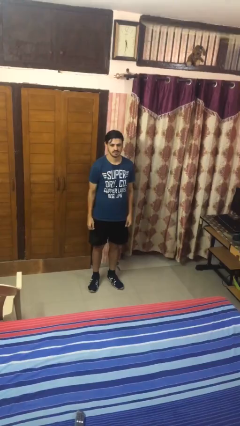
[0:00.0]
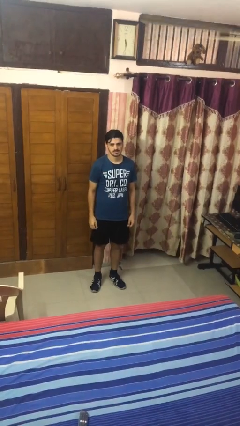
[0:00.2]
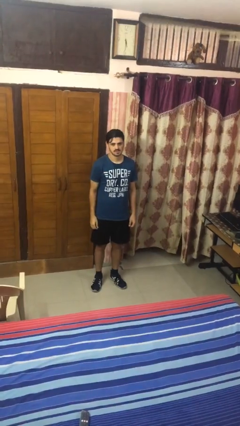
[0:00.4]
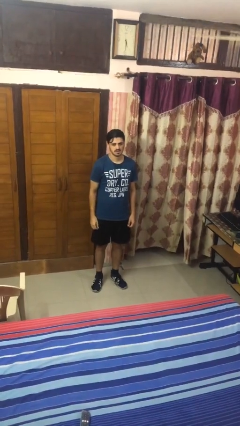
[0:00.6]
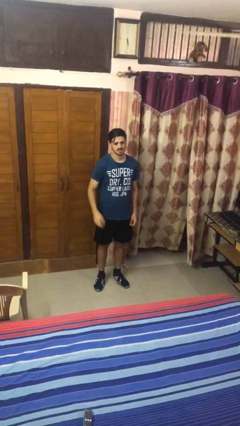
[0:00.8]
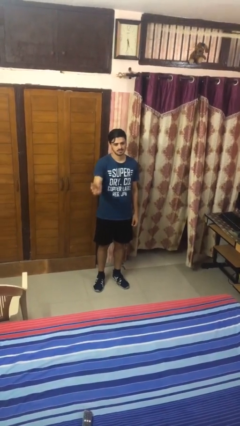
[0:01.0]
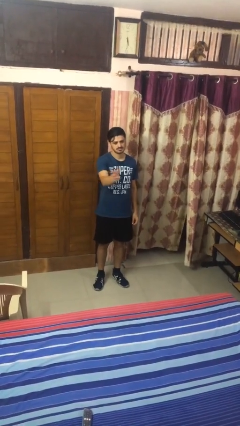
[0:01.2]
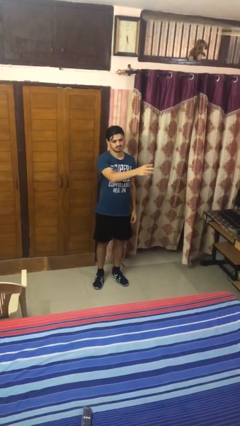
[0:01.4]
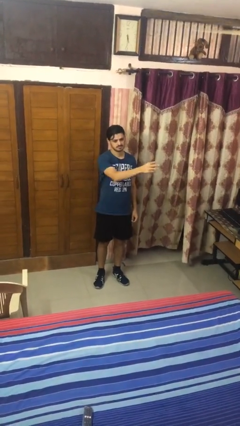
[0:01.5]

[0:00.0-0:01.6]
person gestures swipe left

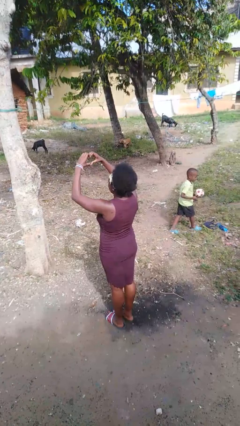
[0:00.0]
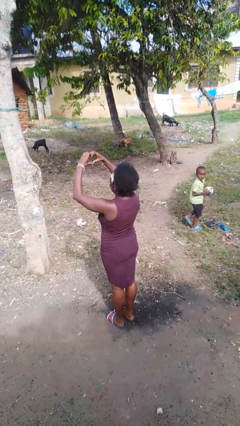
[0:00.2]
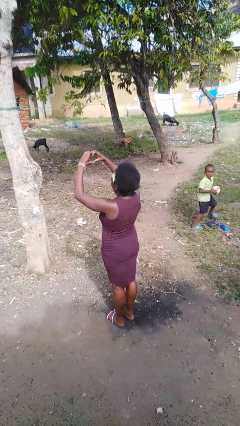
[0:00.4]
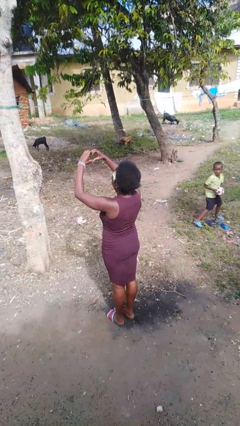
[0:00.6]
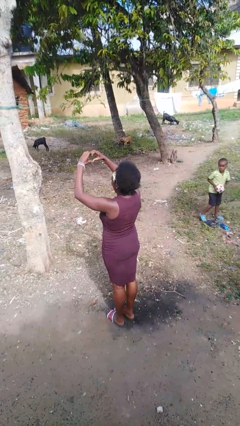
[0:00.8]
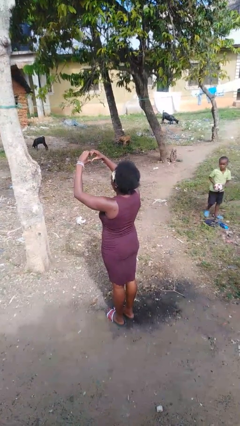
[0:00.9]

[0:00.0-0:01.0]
person gestures heart

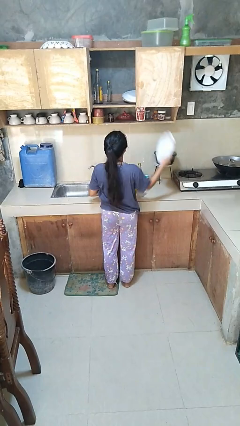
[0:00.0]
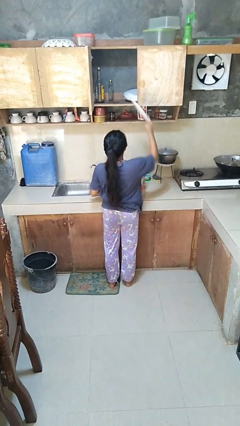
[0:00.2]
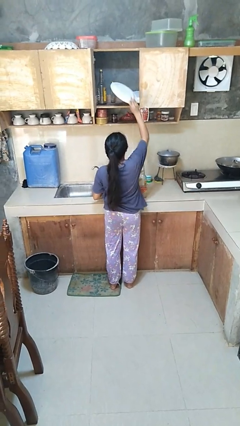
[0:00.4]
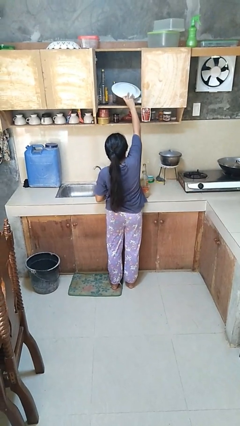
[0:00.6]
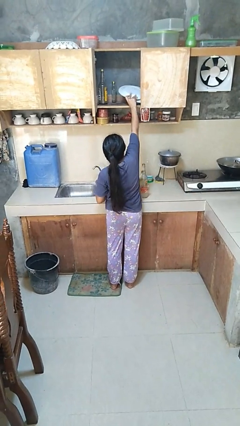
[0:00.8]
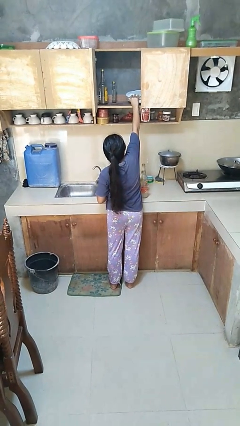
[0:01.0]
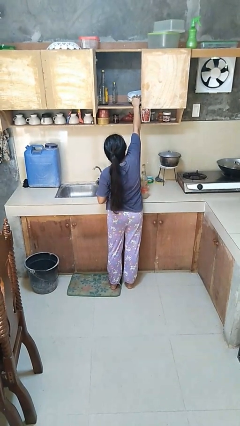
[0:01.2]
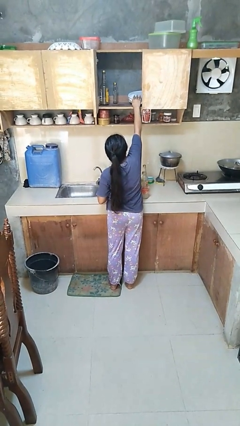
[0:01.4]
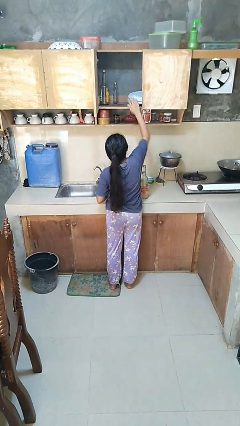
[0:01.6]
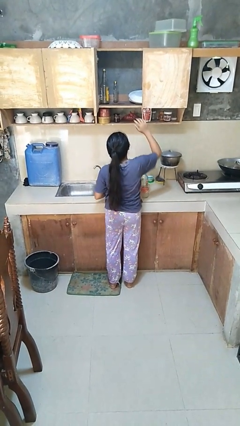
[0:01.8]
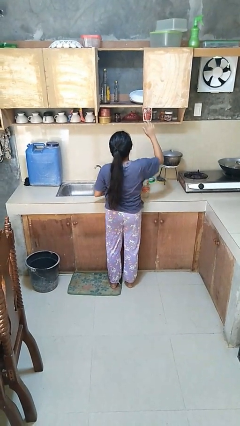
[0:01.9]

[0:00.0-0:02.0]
person puts object in cabinet

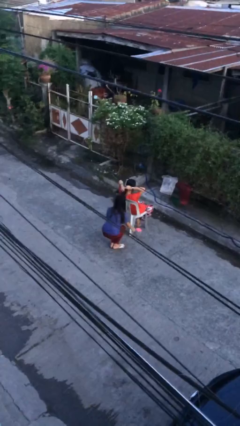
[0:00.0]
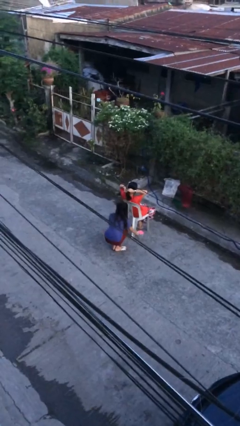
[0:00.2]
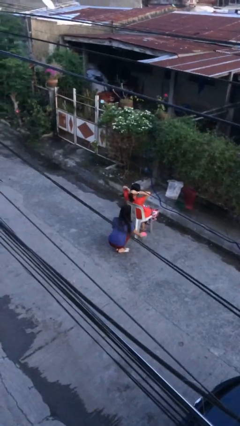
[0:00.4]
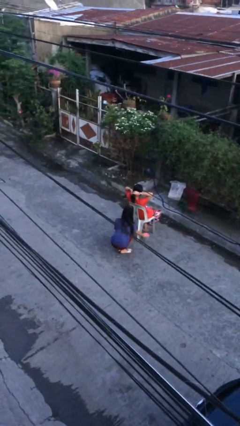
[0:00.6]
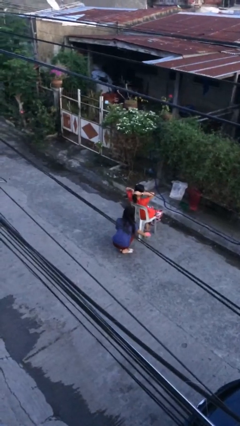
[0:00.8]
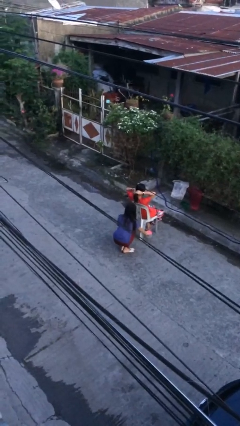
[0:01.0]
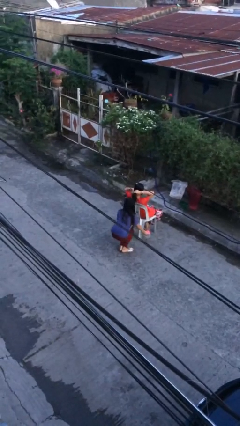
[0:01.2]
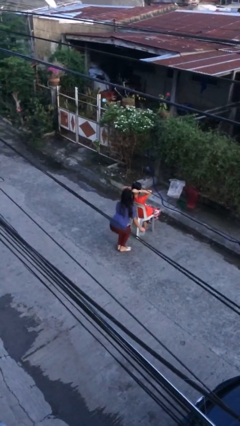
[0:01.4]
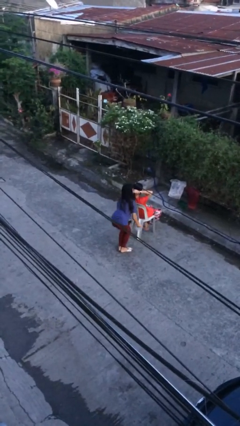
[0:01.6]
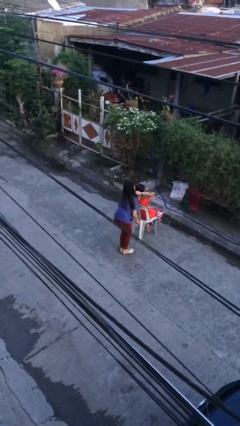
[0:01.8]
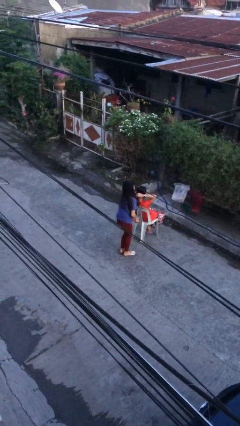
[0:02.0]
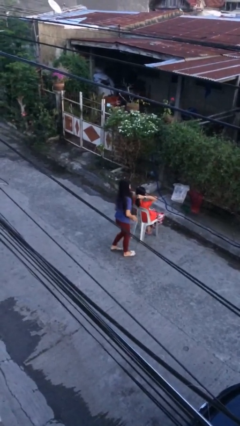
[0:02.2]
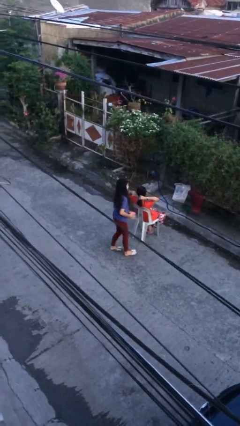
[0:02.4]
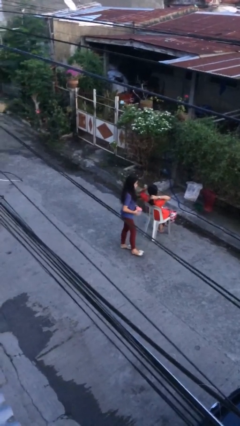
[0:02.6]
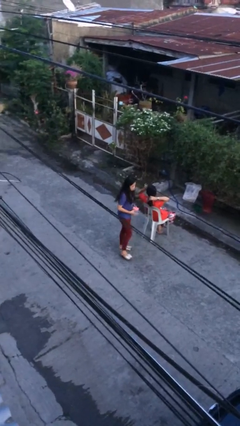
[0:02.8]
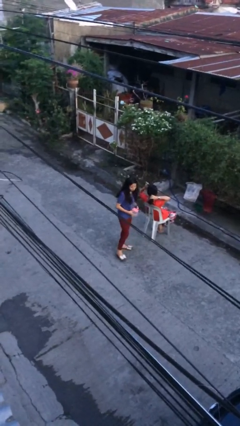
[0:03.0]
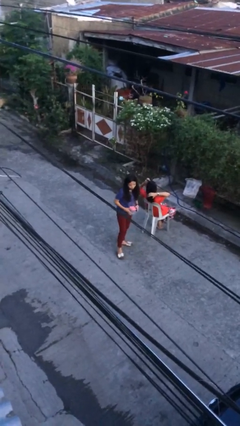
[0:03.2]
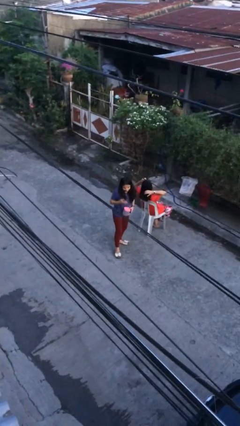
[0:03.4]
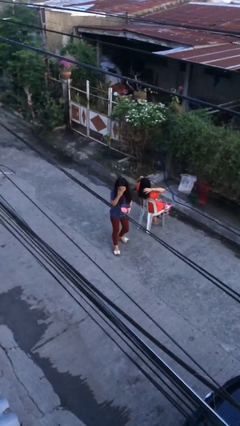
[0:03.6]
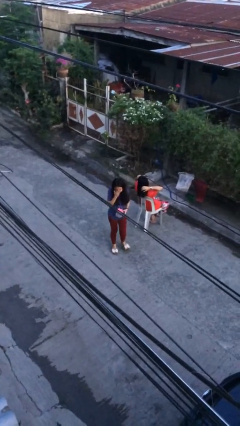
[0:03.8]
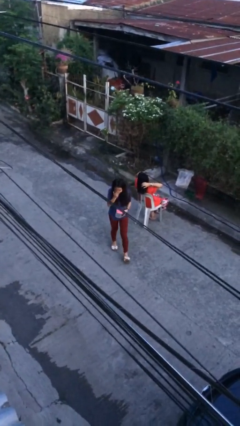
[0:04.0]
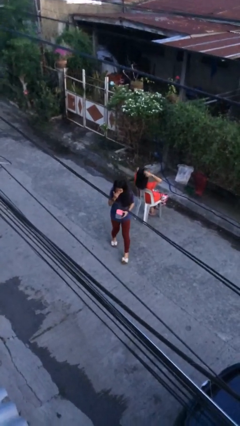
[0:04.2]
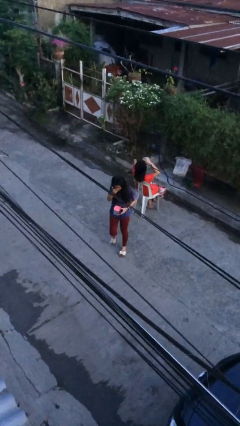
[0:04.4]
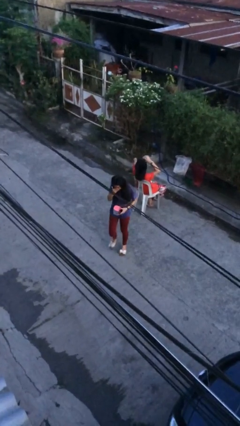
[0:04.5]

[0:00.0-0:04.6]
person steals object from person

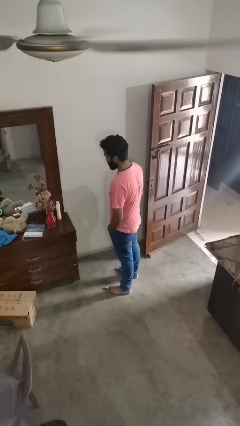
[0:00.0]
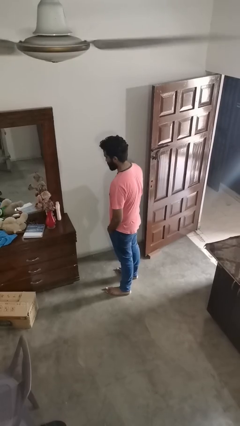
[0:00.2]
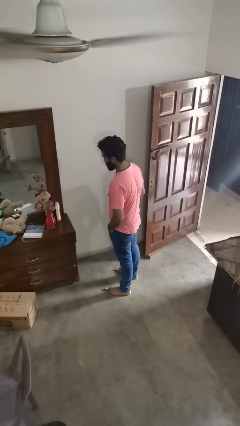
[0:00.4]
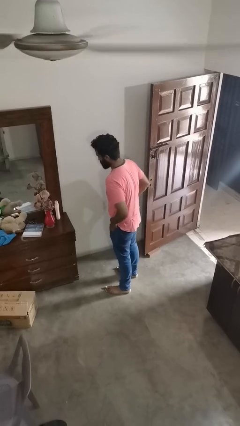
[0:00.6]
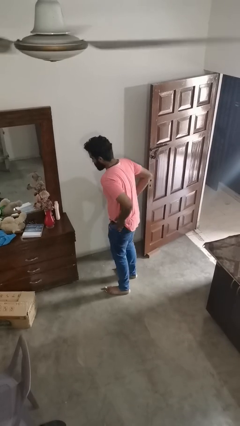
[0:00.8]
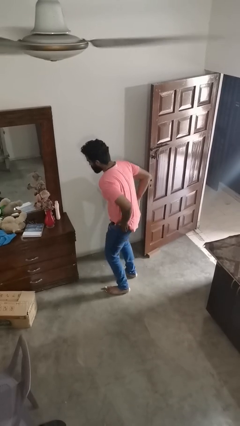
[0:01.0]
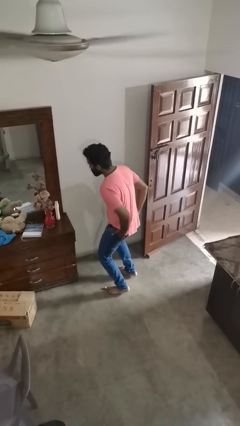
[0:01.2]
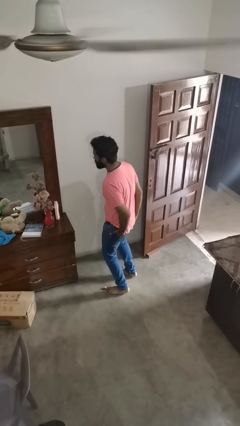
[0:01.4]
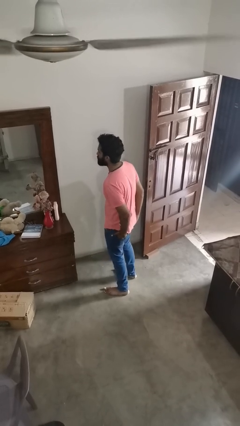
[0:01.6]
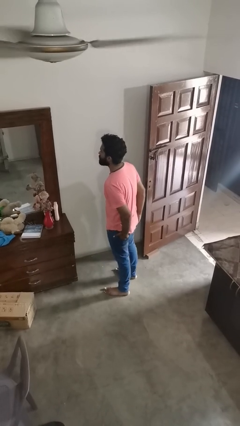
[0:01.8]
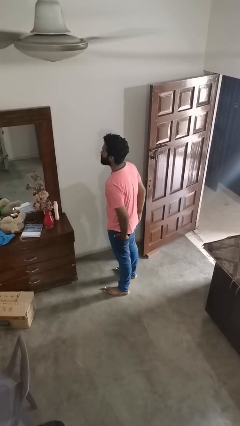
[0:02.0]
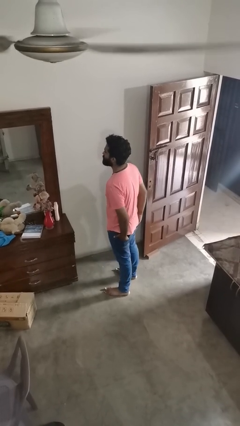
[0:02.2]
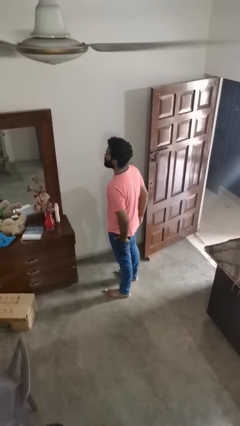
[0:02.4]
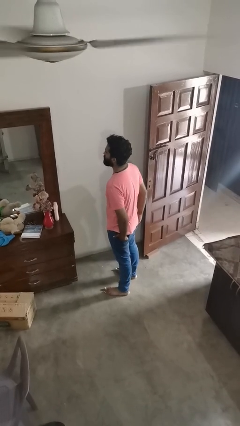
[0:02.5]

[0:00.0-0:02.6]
person puts hands in back pockets

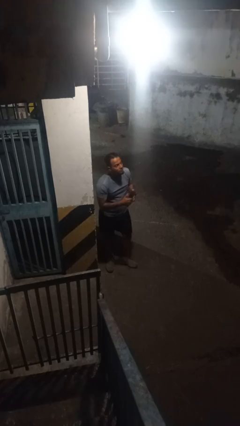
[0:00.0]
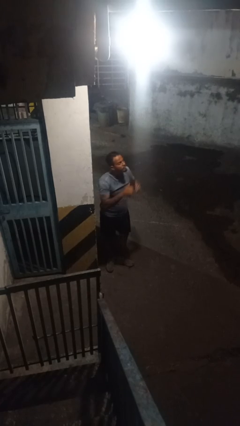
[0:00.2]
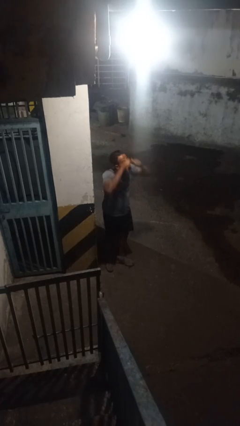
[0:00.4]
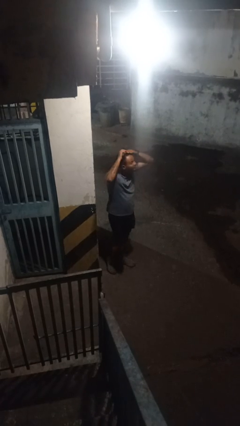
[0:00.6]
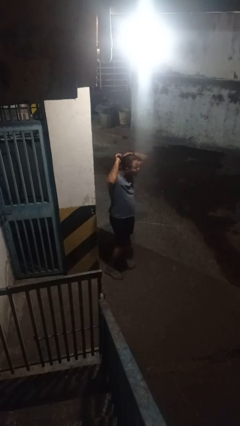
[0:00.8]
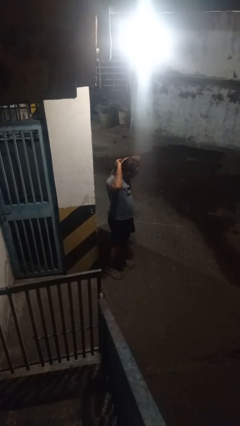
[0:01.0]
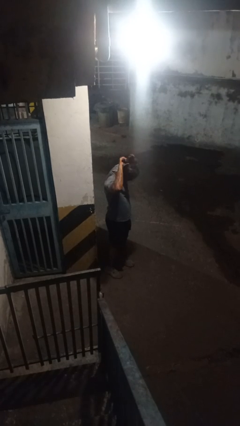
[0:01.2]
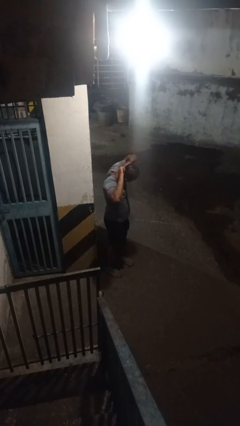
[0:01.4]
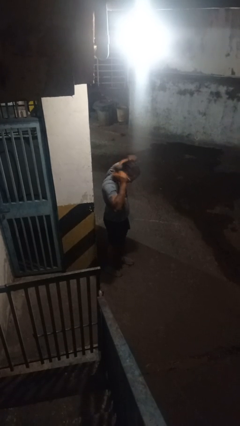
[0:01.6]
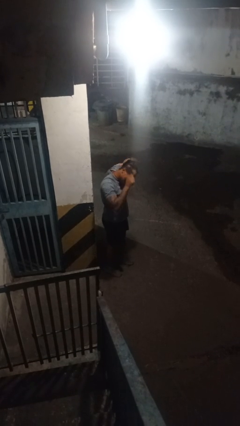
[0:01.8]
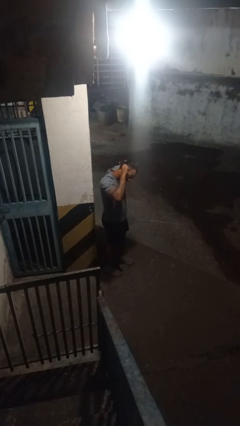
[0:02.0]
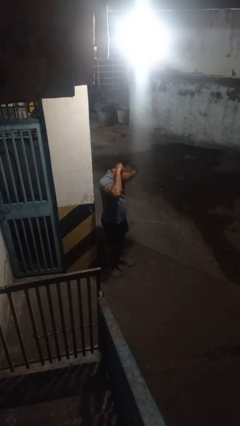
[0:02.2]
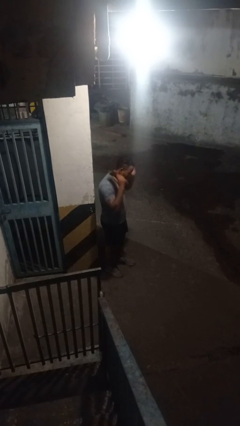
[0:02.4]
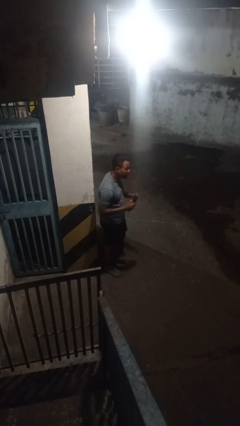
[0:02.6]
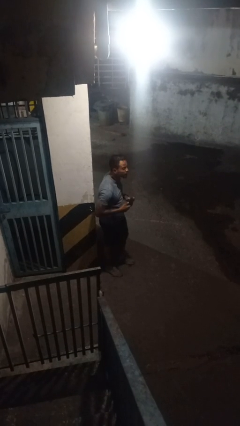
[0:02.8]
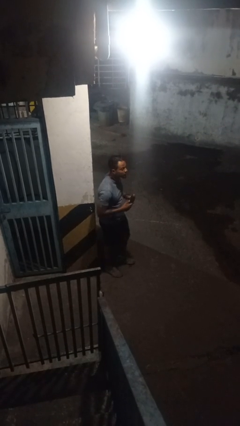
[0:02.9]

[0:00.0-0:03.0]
person brushes hair

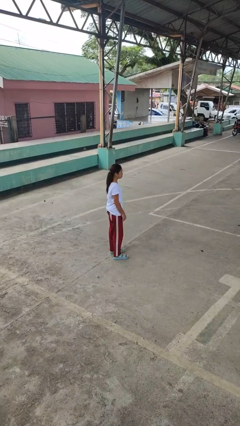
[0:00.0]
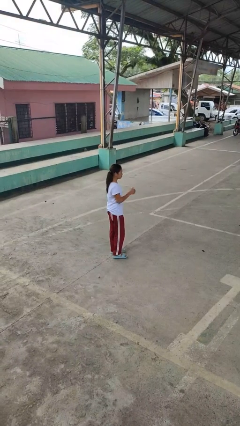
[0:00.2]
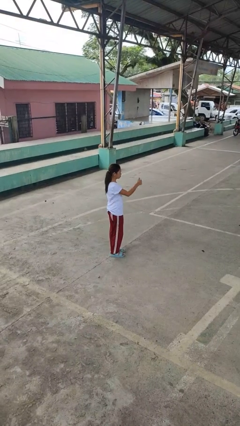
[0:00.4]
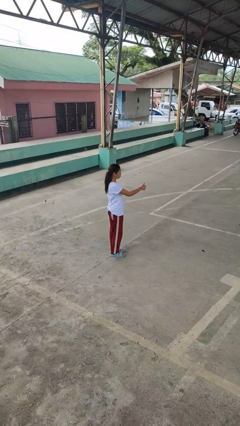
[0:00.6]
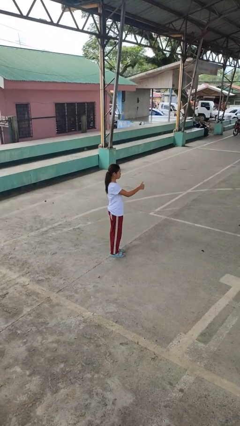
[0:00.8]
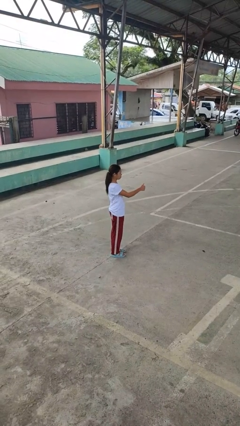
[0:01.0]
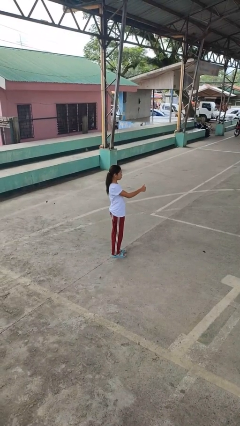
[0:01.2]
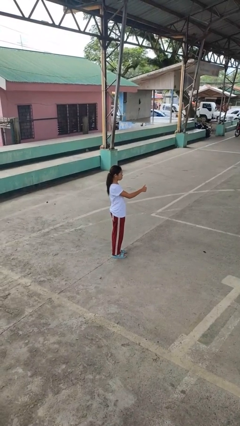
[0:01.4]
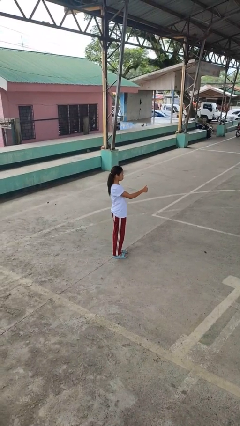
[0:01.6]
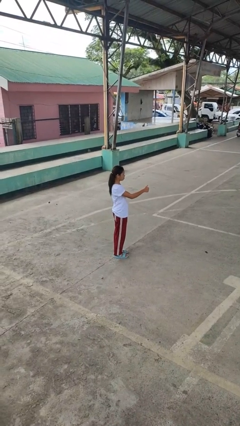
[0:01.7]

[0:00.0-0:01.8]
person gestures thumbs up

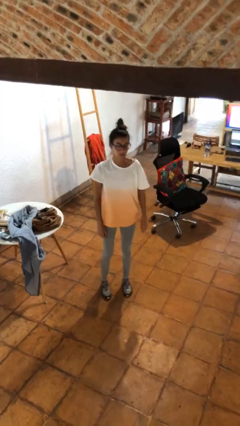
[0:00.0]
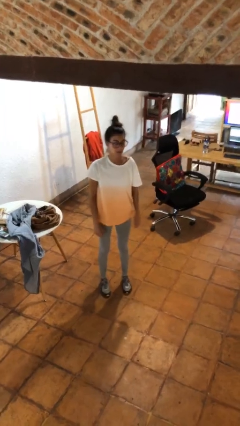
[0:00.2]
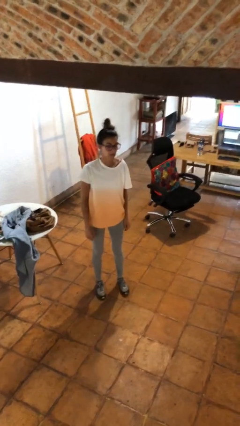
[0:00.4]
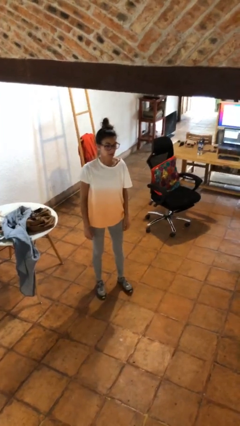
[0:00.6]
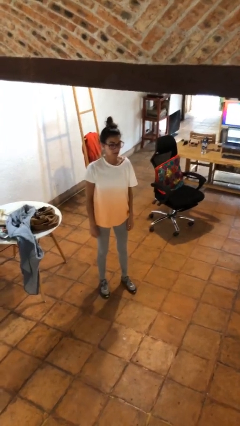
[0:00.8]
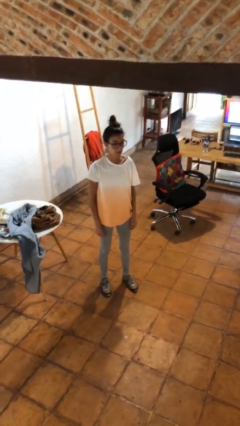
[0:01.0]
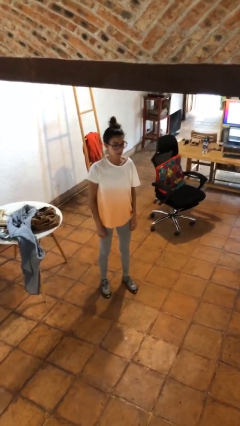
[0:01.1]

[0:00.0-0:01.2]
person stands up
